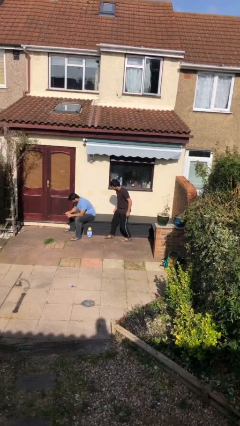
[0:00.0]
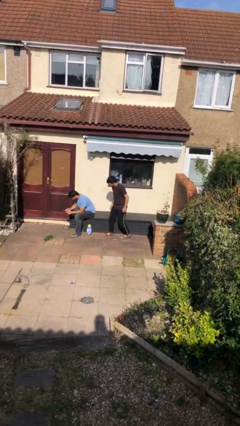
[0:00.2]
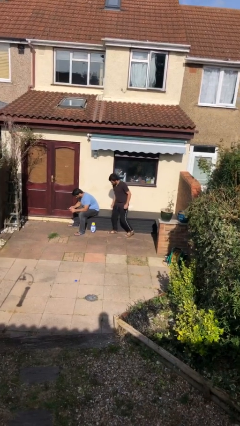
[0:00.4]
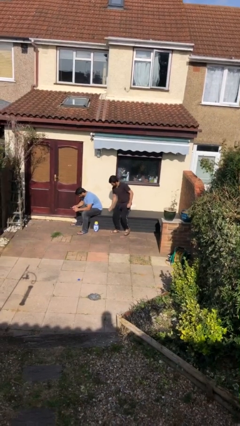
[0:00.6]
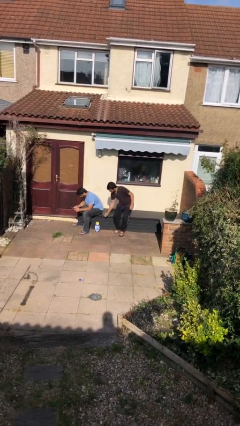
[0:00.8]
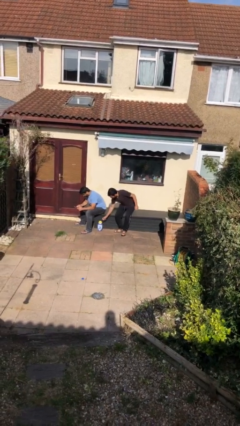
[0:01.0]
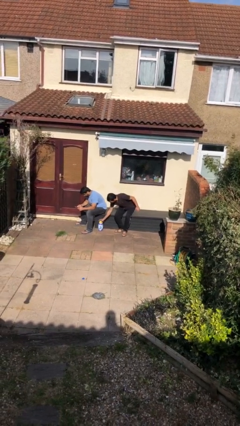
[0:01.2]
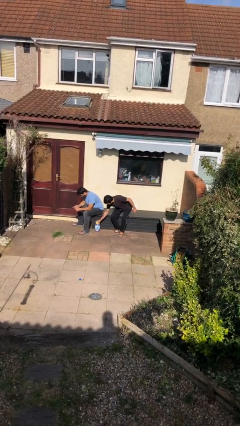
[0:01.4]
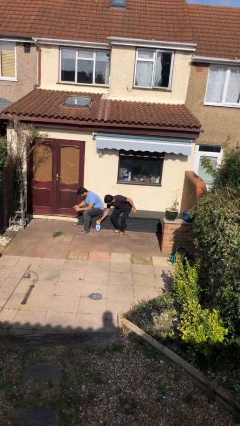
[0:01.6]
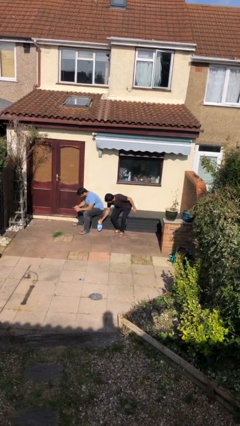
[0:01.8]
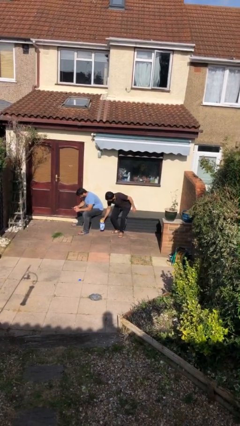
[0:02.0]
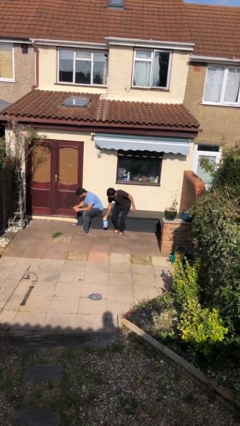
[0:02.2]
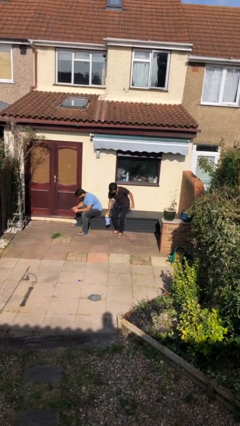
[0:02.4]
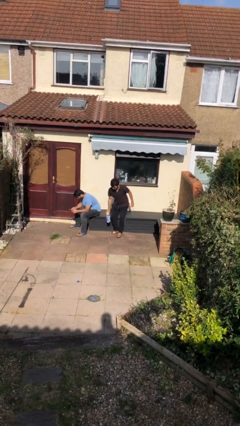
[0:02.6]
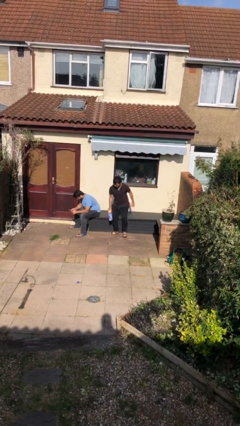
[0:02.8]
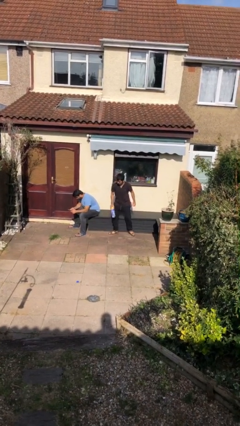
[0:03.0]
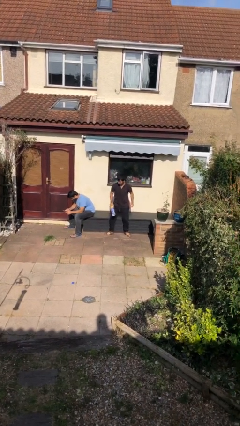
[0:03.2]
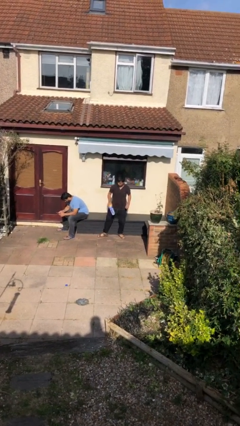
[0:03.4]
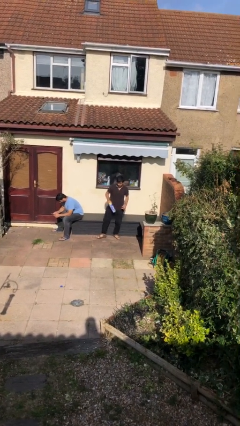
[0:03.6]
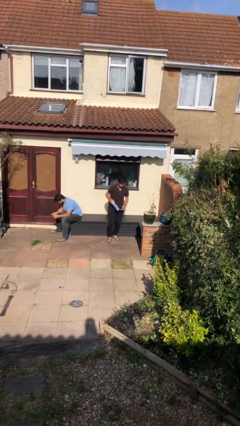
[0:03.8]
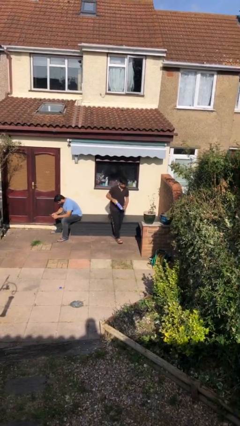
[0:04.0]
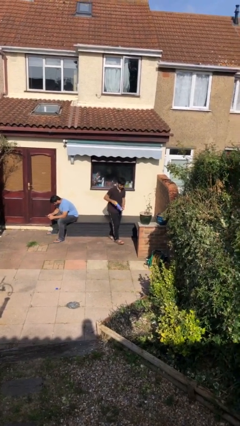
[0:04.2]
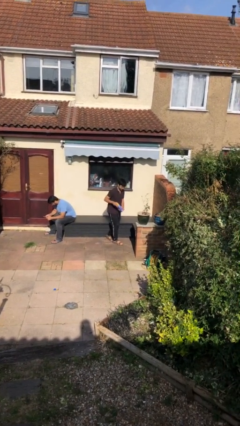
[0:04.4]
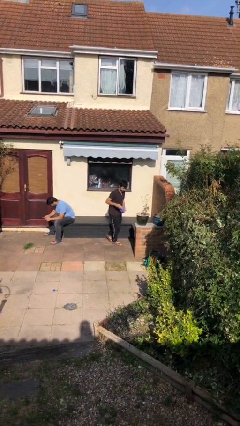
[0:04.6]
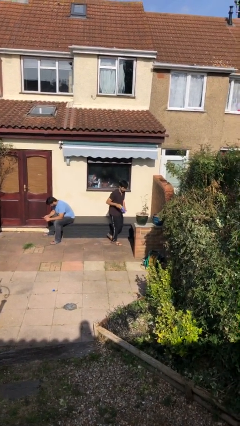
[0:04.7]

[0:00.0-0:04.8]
person steals object from person

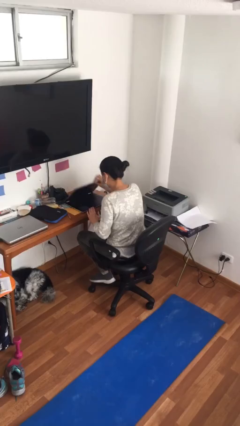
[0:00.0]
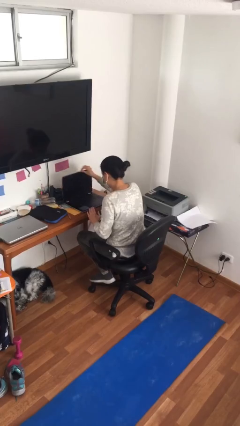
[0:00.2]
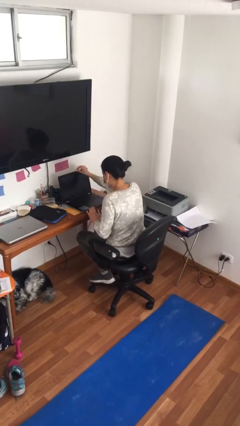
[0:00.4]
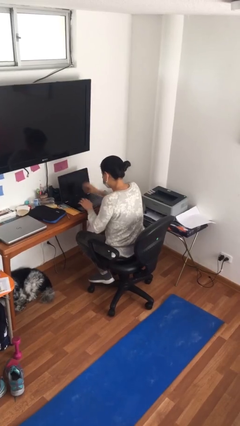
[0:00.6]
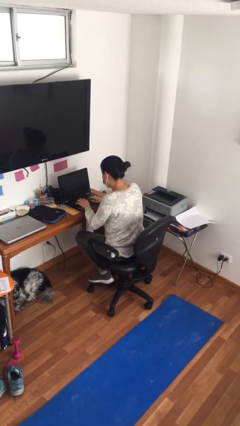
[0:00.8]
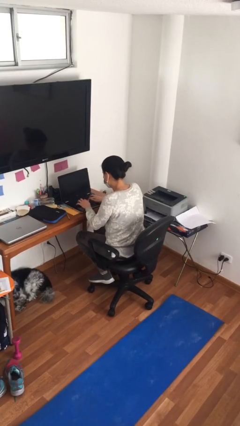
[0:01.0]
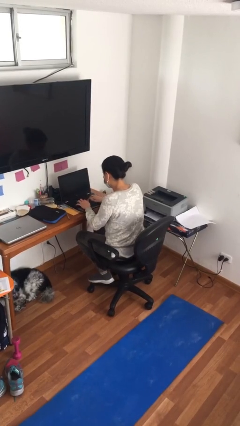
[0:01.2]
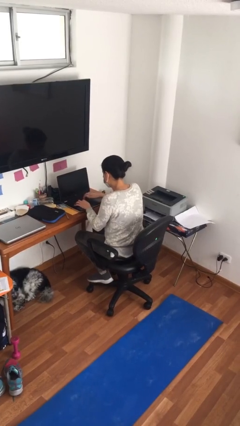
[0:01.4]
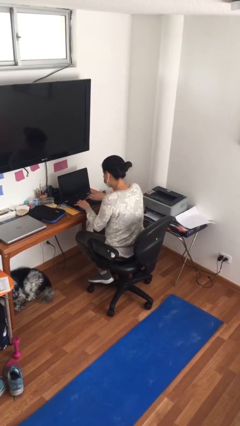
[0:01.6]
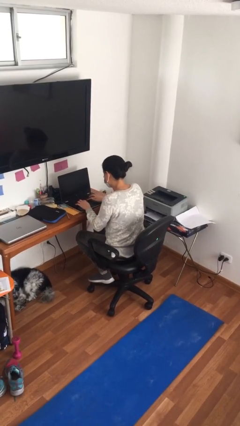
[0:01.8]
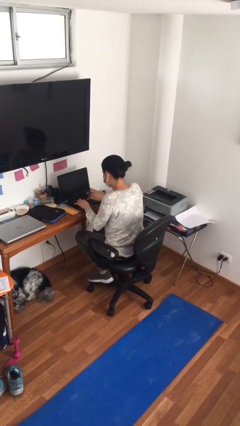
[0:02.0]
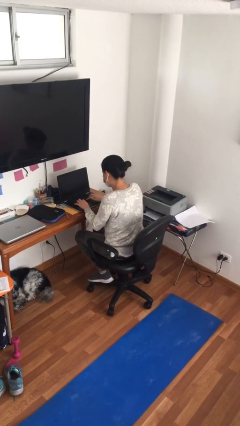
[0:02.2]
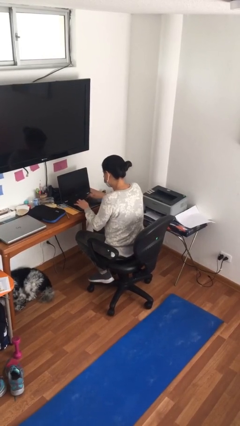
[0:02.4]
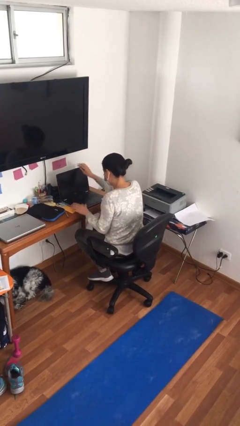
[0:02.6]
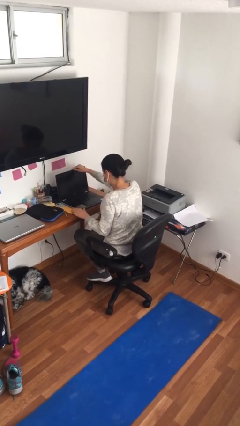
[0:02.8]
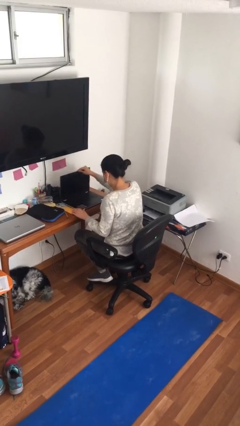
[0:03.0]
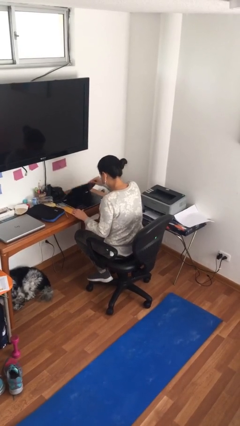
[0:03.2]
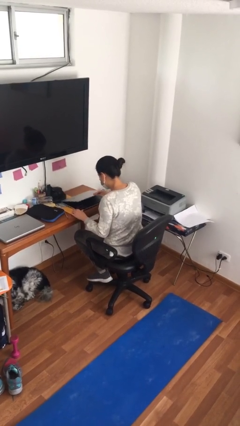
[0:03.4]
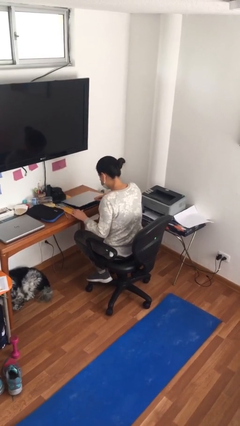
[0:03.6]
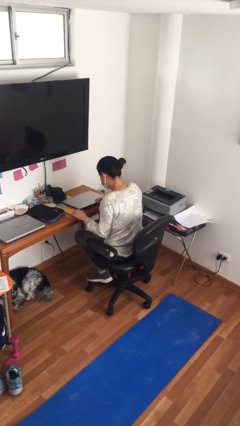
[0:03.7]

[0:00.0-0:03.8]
person interacts with laptop

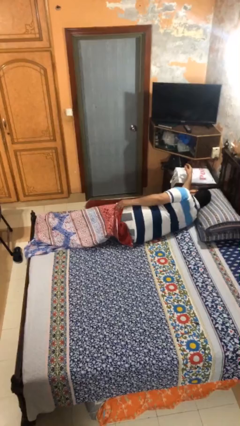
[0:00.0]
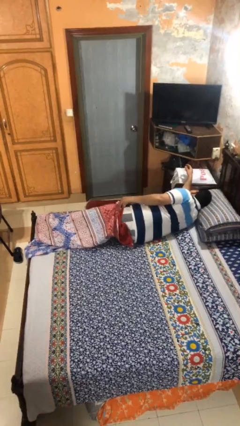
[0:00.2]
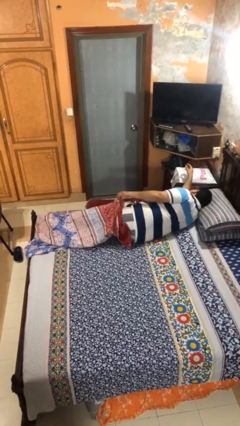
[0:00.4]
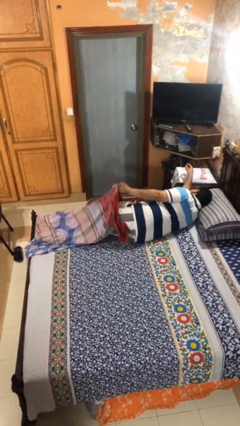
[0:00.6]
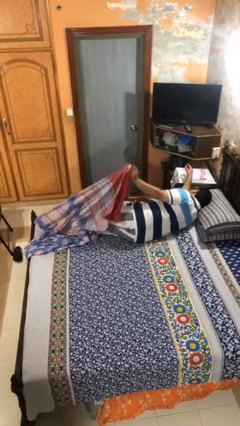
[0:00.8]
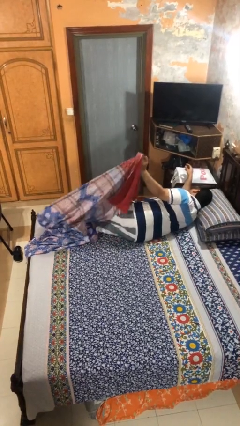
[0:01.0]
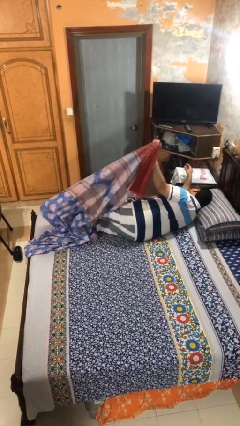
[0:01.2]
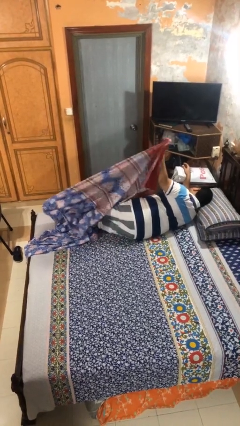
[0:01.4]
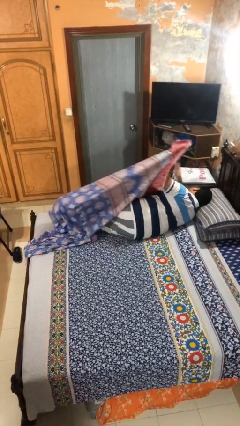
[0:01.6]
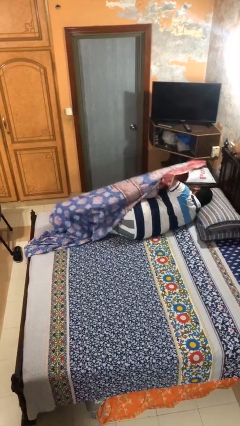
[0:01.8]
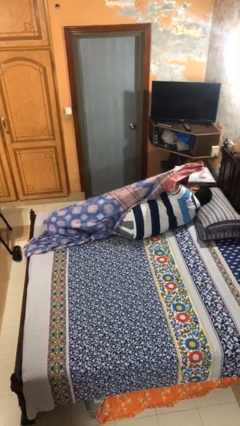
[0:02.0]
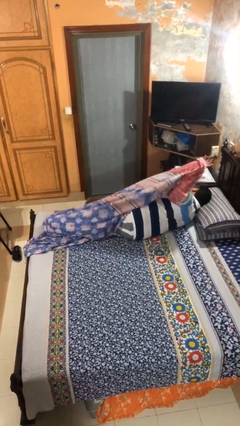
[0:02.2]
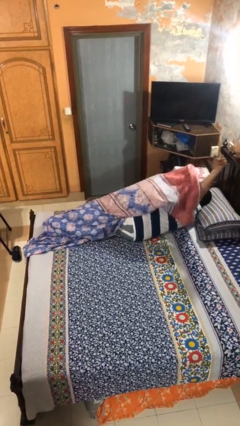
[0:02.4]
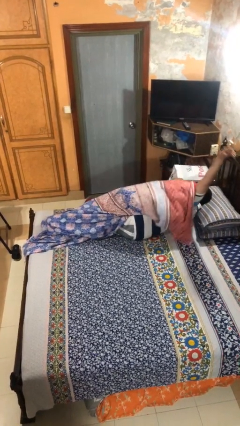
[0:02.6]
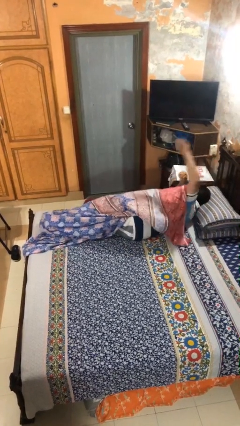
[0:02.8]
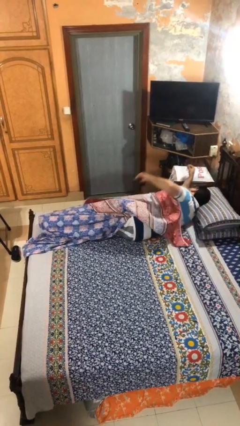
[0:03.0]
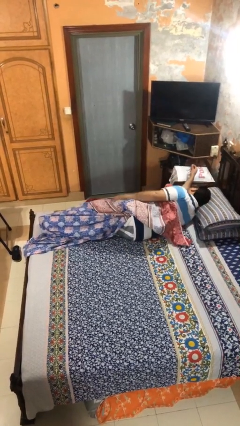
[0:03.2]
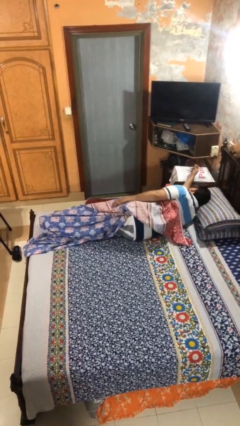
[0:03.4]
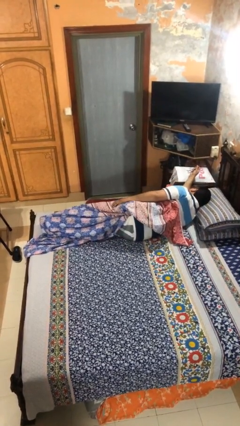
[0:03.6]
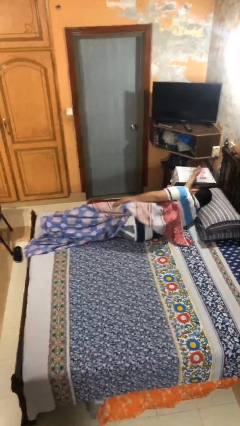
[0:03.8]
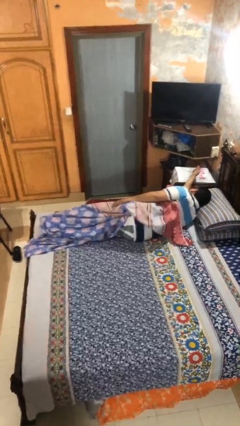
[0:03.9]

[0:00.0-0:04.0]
person covers with bedsheets

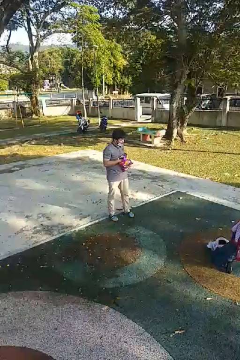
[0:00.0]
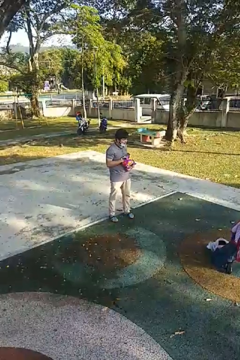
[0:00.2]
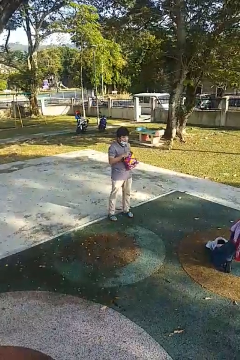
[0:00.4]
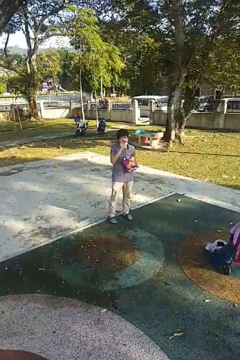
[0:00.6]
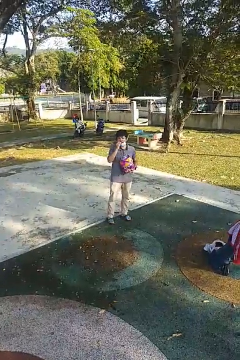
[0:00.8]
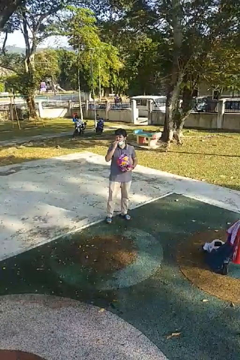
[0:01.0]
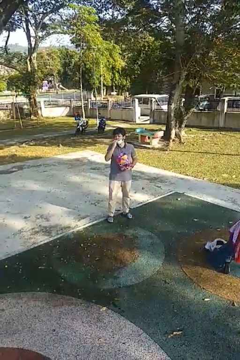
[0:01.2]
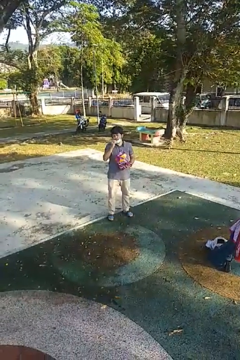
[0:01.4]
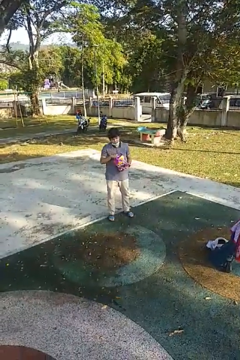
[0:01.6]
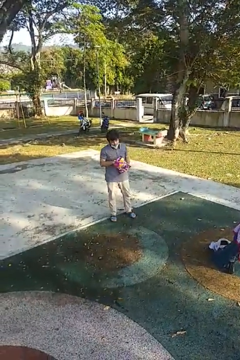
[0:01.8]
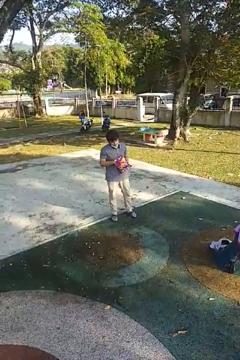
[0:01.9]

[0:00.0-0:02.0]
person eats snack from bag

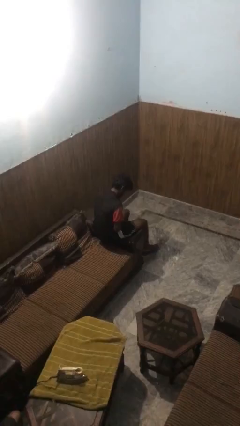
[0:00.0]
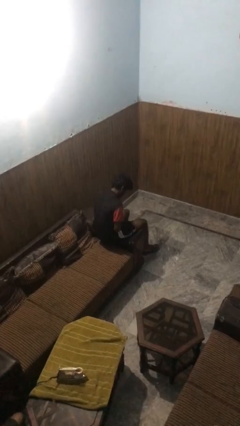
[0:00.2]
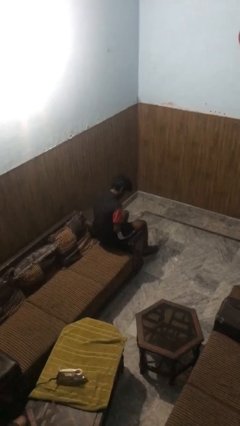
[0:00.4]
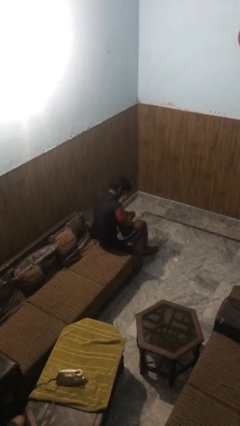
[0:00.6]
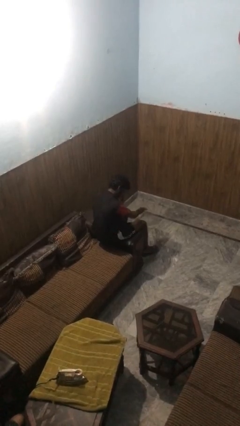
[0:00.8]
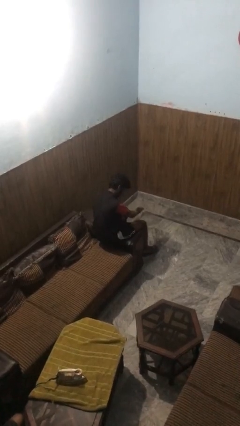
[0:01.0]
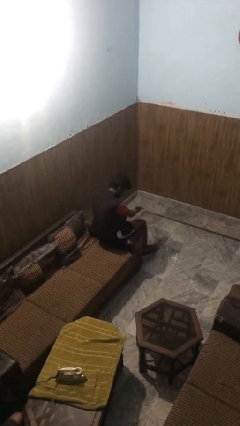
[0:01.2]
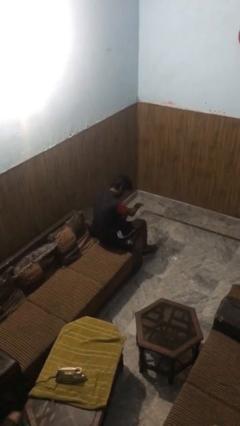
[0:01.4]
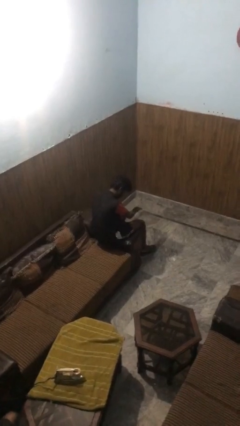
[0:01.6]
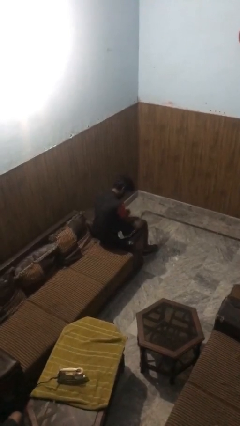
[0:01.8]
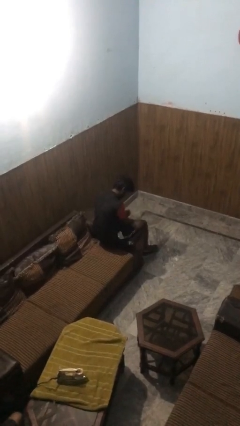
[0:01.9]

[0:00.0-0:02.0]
person swats bug

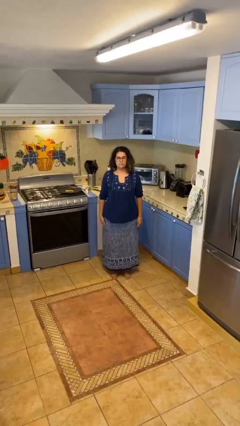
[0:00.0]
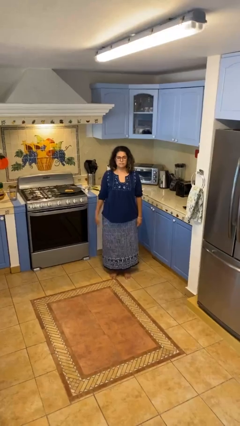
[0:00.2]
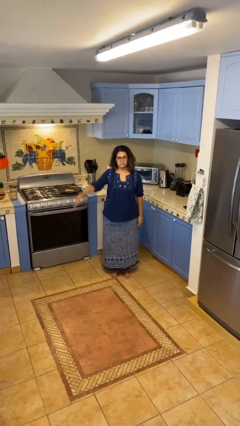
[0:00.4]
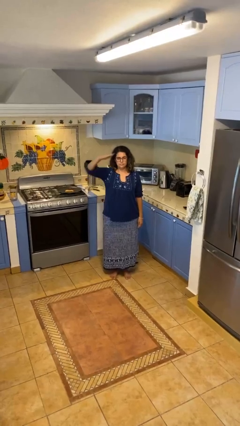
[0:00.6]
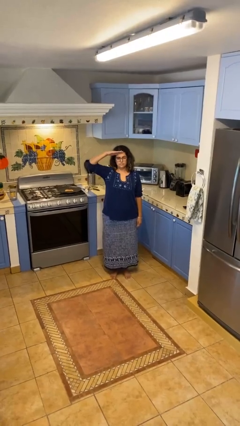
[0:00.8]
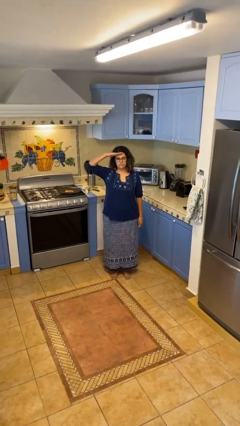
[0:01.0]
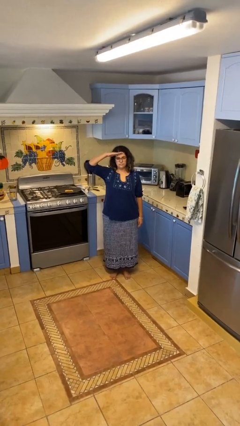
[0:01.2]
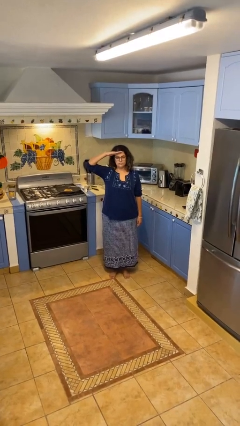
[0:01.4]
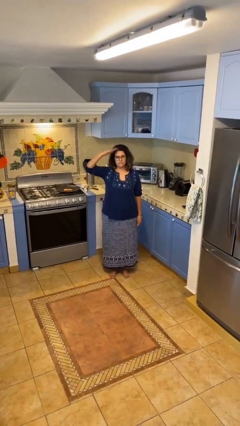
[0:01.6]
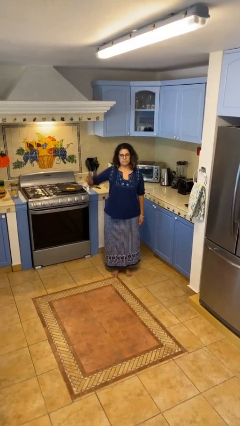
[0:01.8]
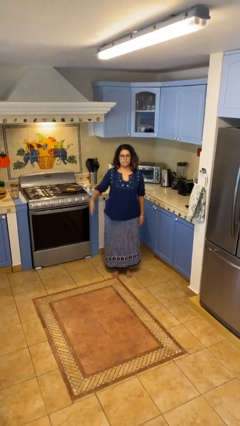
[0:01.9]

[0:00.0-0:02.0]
person salutes
